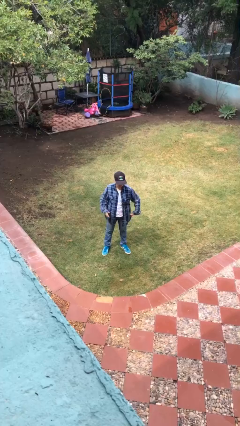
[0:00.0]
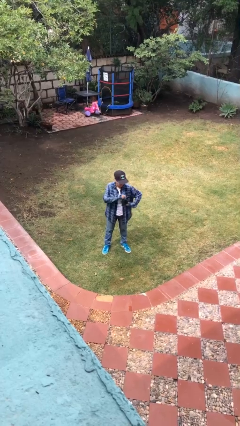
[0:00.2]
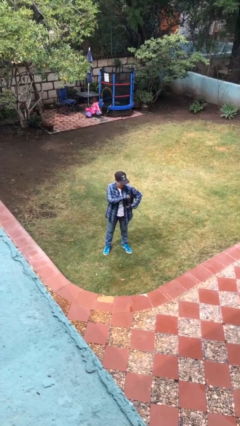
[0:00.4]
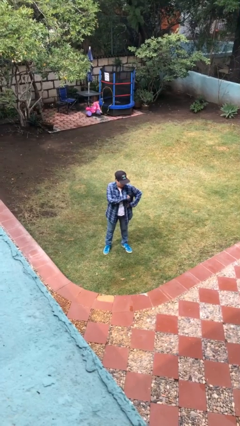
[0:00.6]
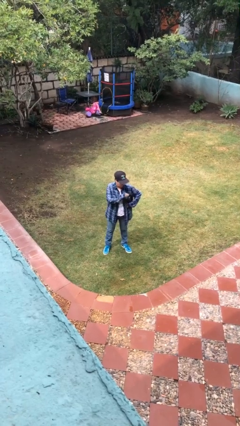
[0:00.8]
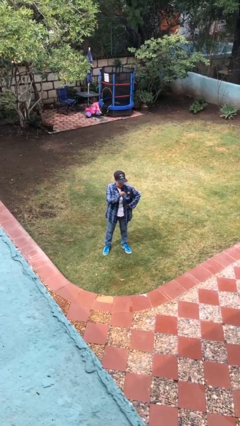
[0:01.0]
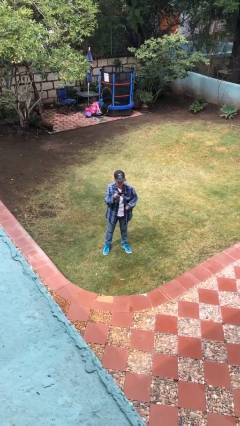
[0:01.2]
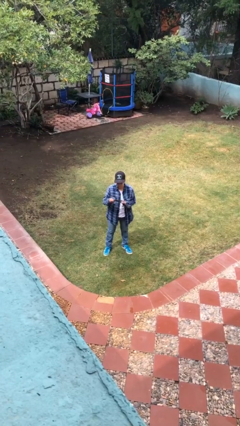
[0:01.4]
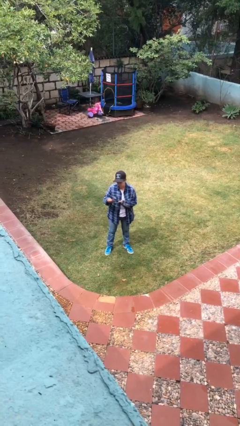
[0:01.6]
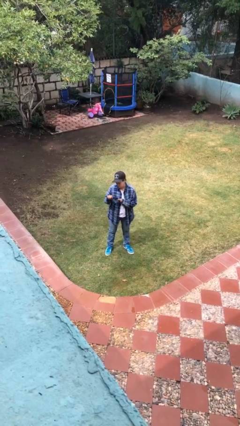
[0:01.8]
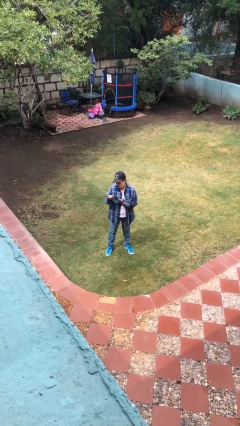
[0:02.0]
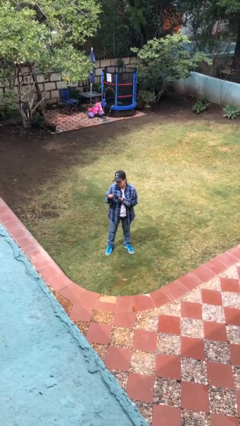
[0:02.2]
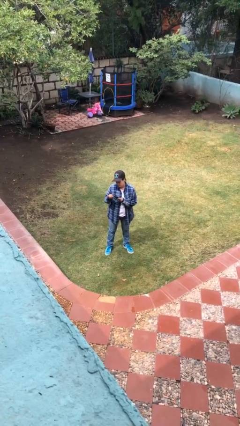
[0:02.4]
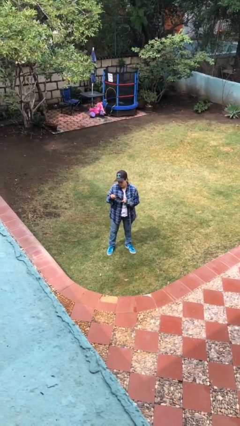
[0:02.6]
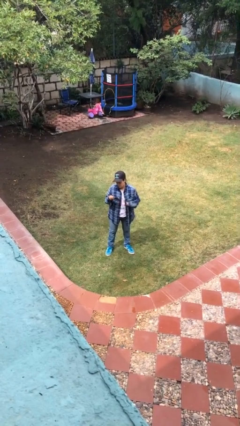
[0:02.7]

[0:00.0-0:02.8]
person takes phone from pocket

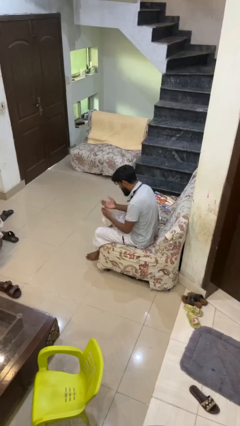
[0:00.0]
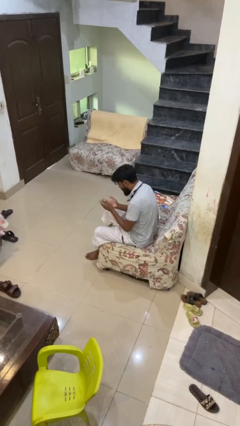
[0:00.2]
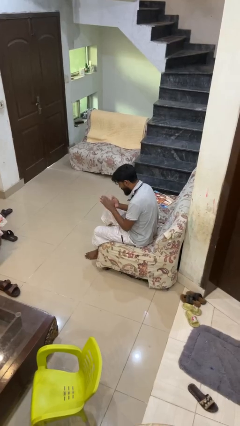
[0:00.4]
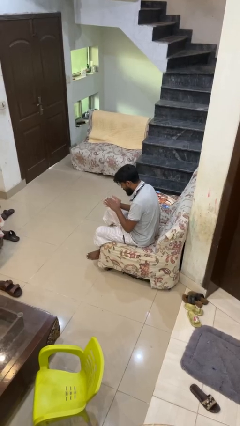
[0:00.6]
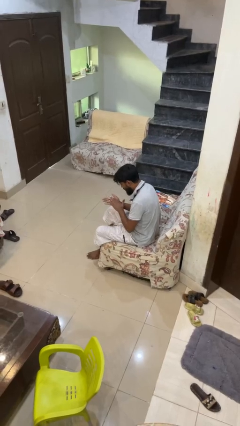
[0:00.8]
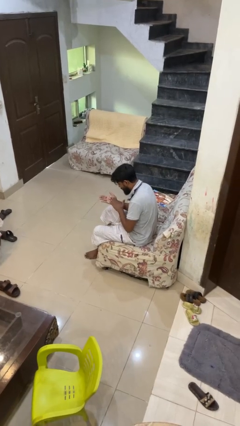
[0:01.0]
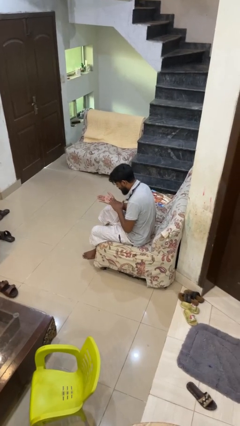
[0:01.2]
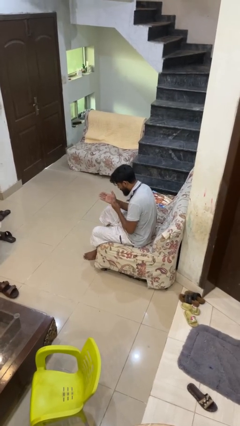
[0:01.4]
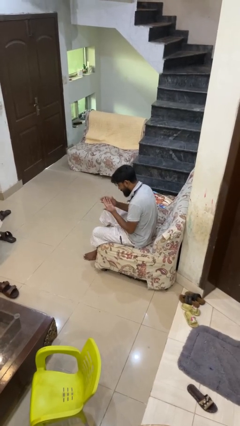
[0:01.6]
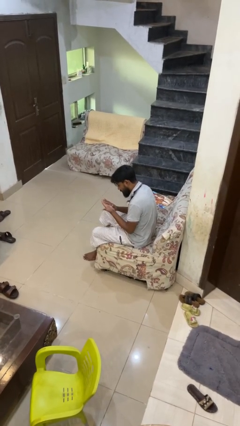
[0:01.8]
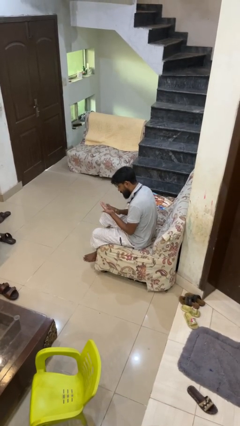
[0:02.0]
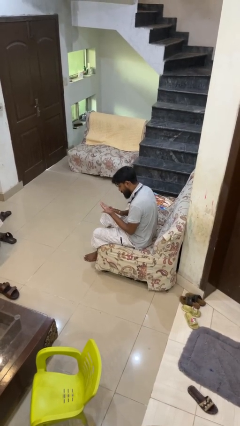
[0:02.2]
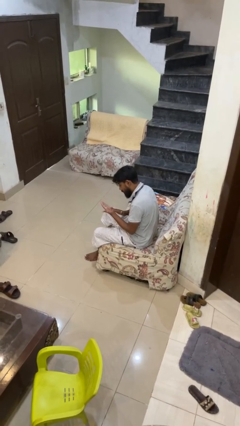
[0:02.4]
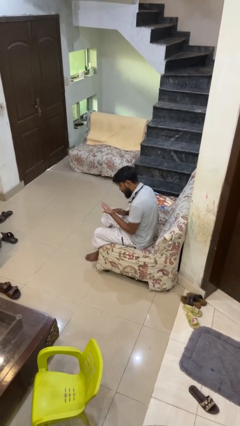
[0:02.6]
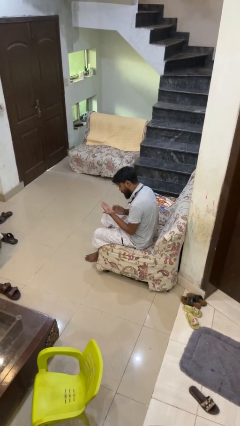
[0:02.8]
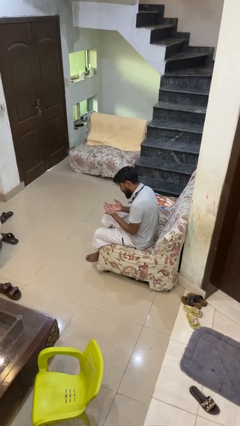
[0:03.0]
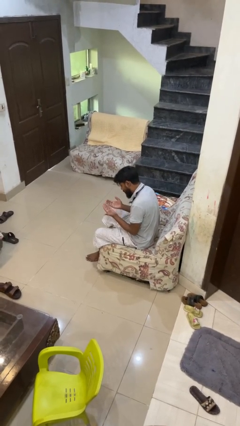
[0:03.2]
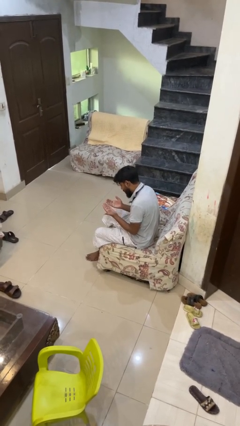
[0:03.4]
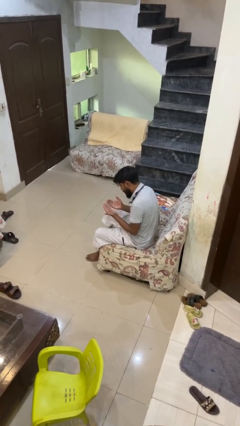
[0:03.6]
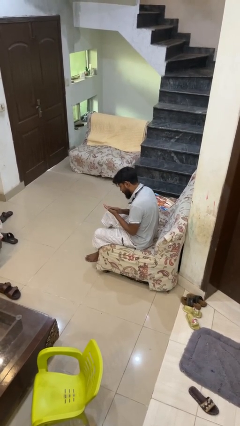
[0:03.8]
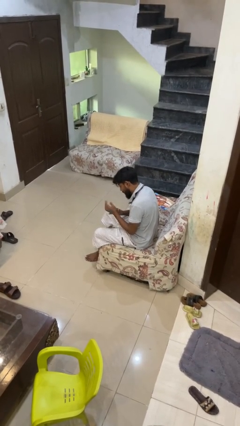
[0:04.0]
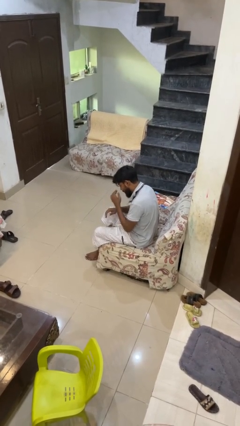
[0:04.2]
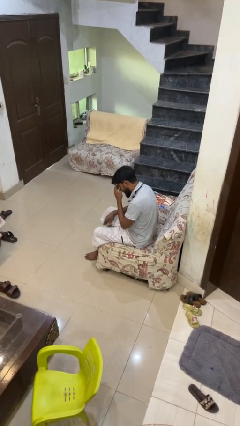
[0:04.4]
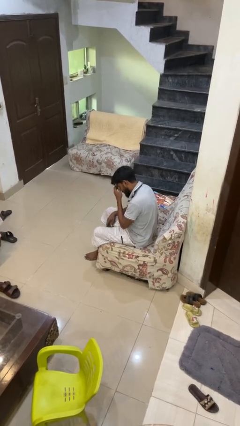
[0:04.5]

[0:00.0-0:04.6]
person looks at hands in lap

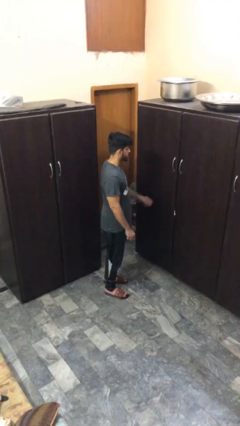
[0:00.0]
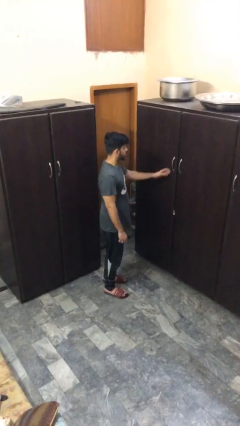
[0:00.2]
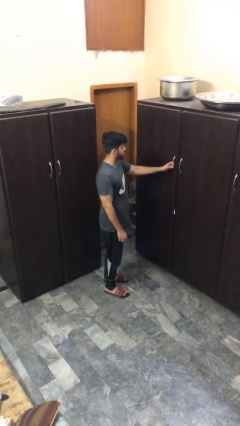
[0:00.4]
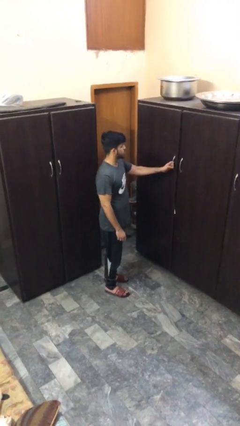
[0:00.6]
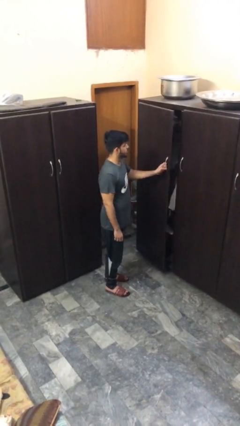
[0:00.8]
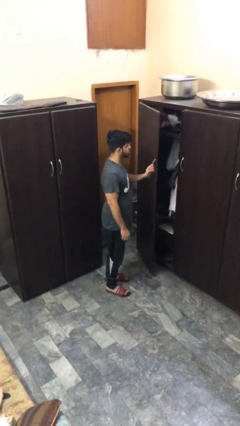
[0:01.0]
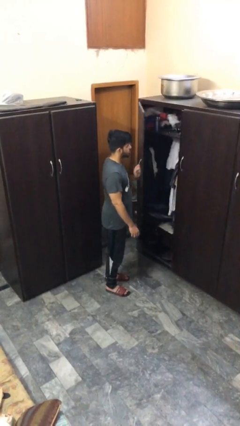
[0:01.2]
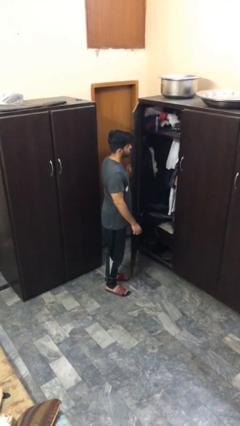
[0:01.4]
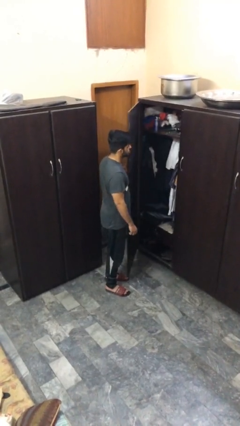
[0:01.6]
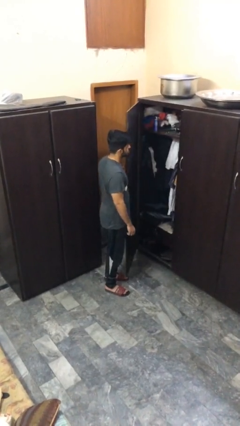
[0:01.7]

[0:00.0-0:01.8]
person opens dresser drawer

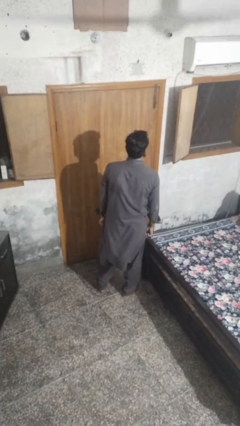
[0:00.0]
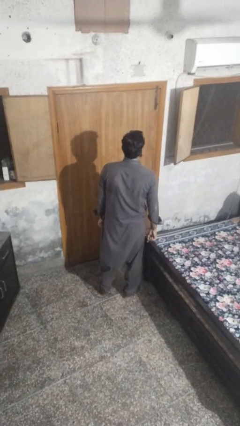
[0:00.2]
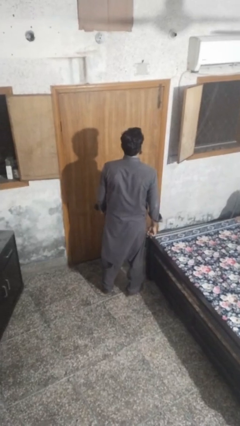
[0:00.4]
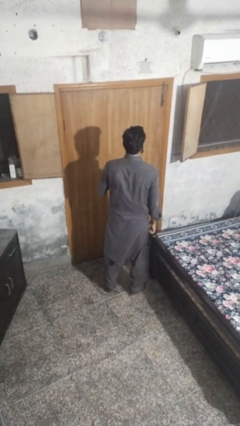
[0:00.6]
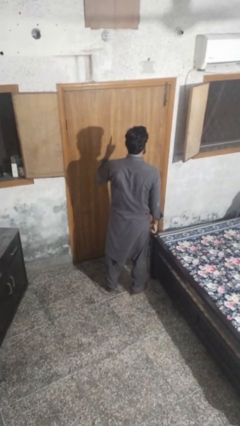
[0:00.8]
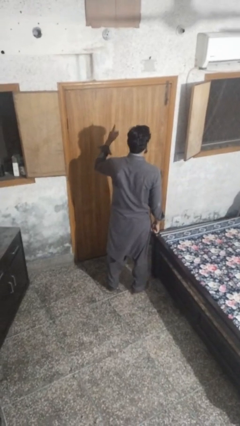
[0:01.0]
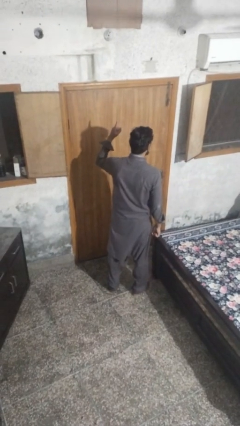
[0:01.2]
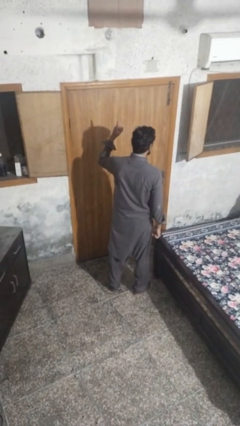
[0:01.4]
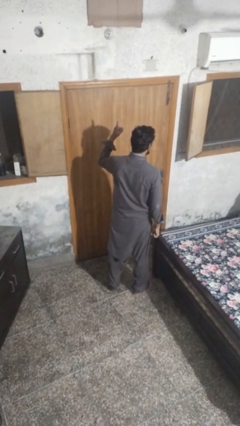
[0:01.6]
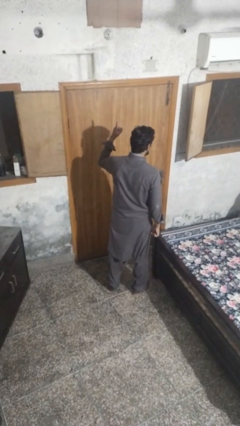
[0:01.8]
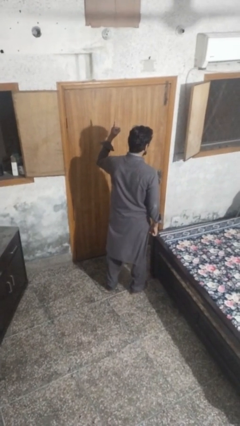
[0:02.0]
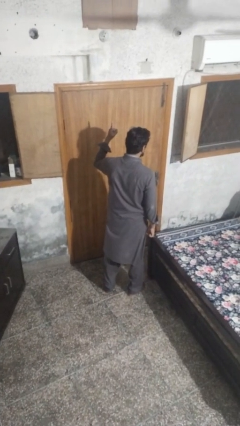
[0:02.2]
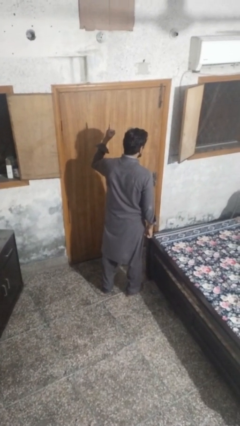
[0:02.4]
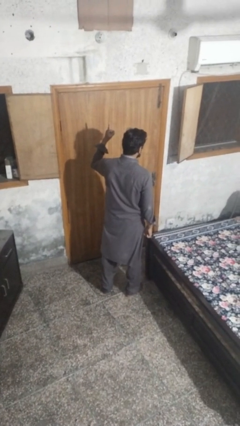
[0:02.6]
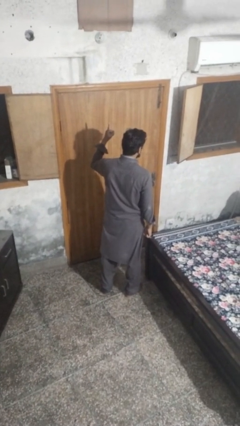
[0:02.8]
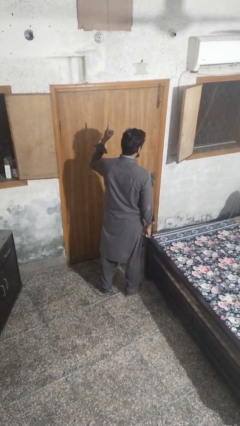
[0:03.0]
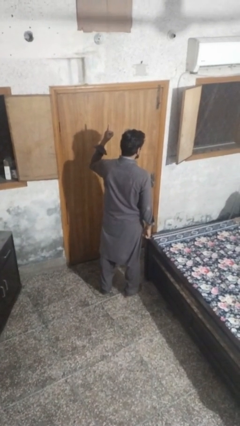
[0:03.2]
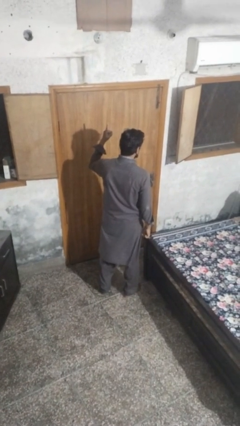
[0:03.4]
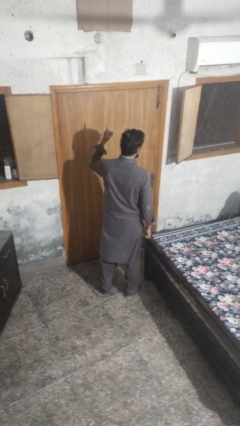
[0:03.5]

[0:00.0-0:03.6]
person gestures number one

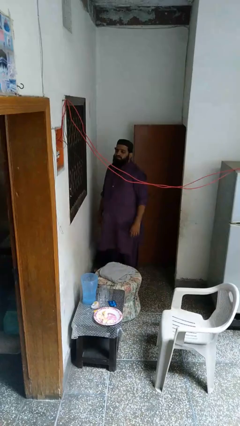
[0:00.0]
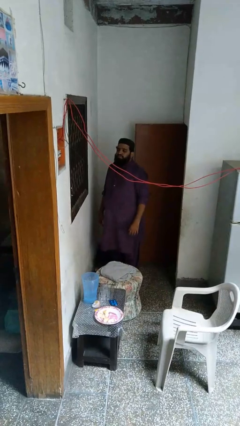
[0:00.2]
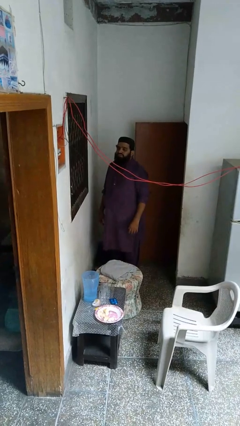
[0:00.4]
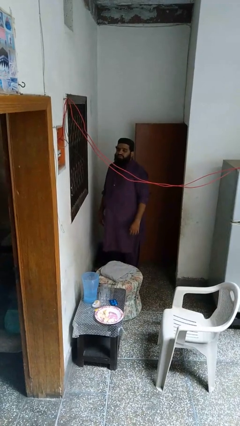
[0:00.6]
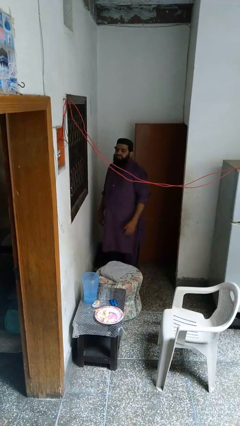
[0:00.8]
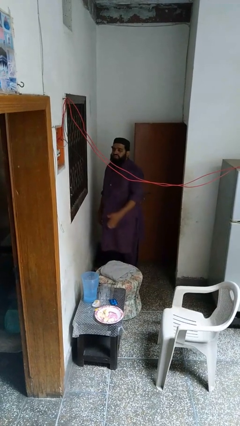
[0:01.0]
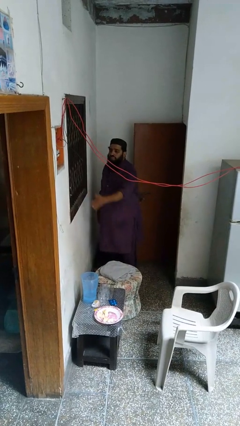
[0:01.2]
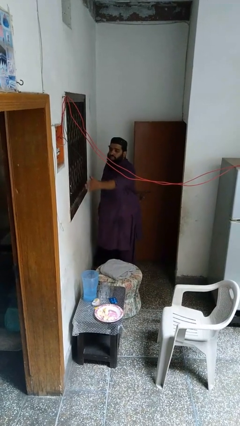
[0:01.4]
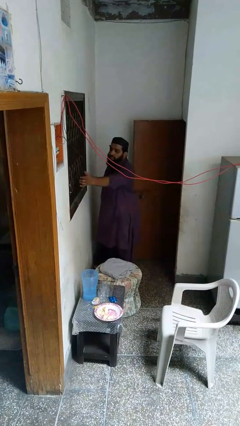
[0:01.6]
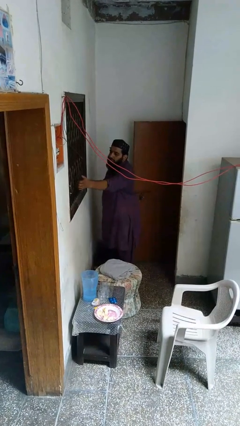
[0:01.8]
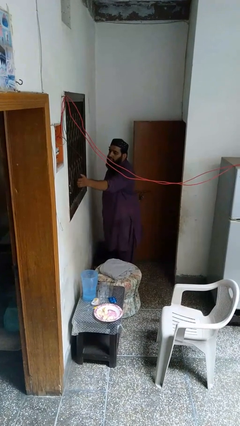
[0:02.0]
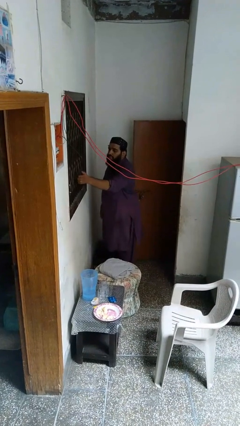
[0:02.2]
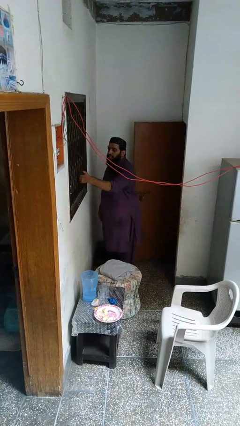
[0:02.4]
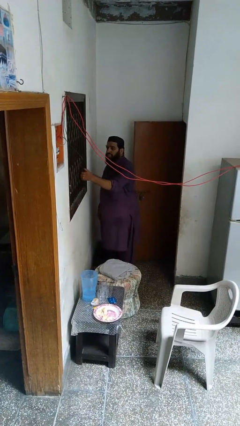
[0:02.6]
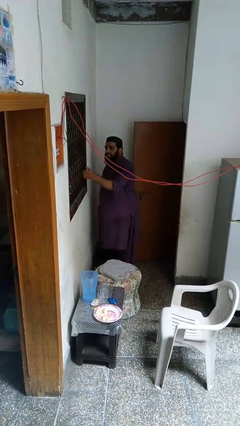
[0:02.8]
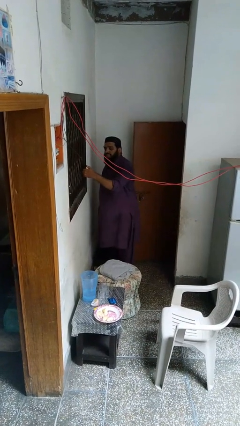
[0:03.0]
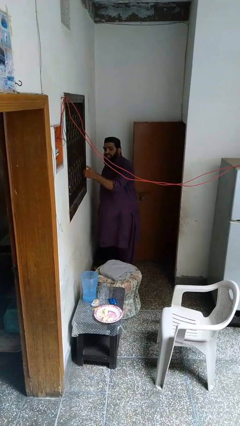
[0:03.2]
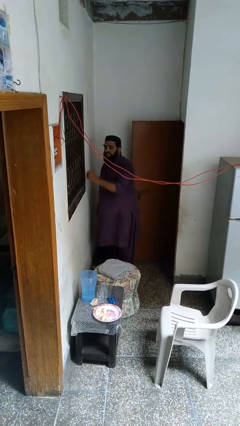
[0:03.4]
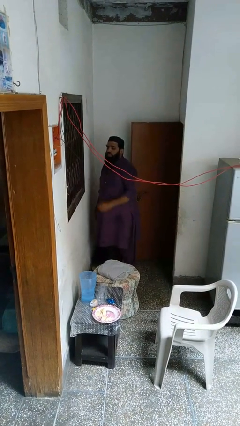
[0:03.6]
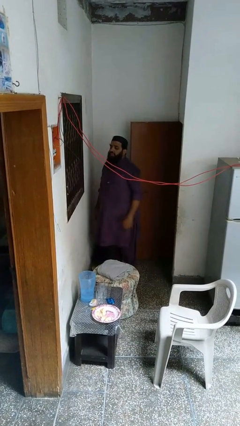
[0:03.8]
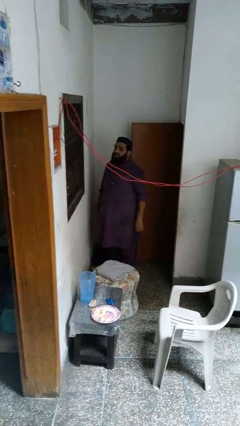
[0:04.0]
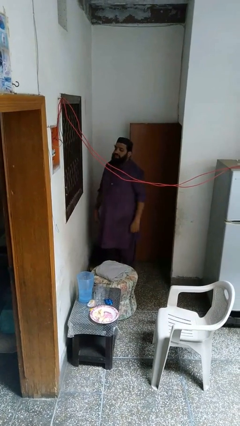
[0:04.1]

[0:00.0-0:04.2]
person closes home window

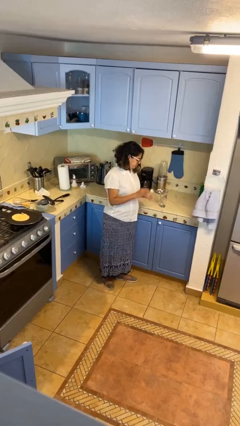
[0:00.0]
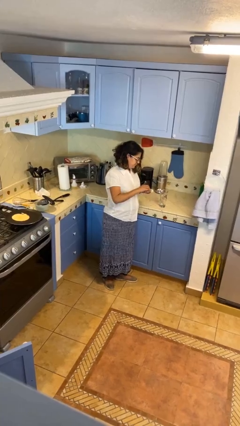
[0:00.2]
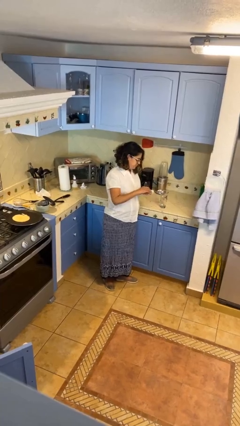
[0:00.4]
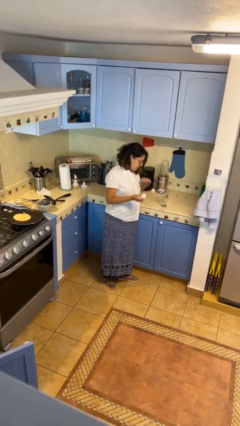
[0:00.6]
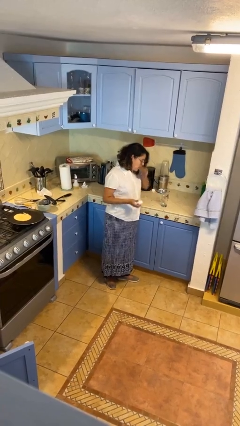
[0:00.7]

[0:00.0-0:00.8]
person takes medicine pills
